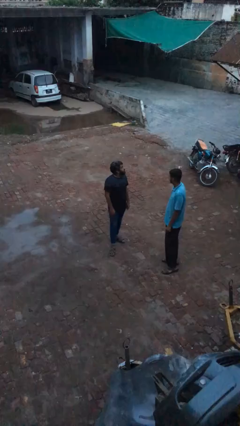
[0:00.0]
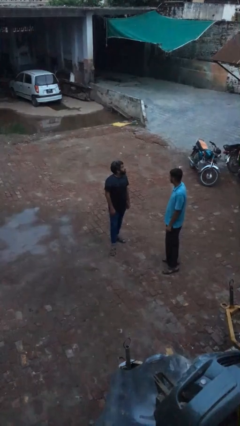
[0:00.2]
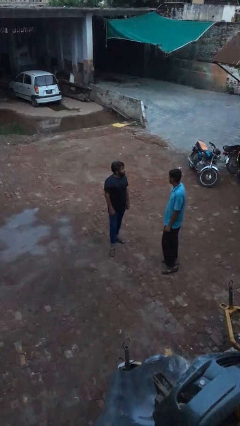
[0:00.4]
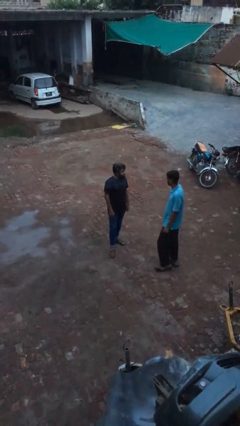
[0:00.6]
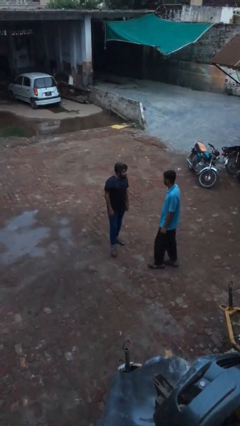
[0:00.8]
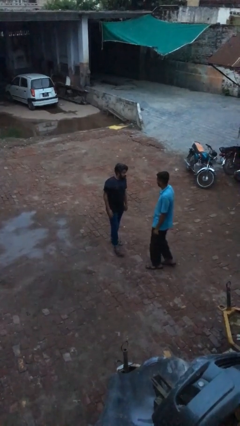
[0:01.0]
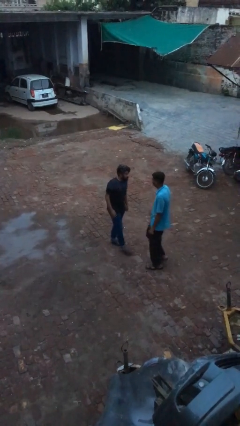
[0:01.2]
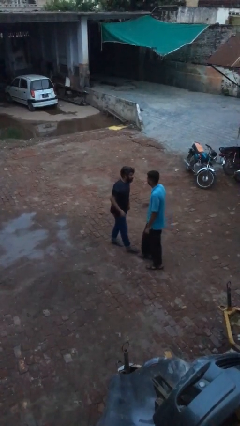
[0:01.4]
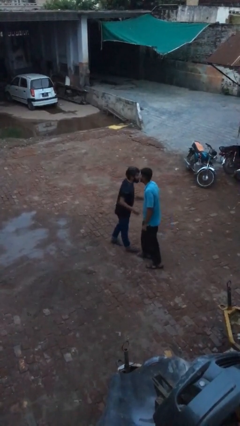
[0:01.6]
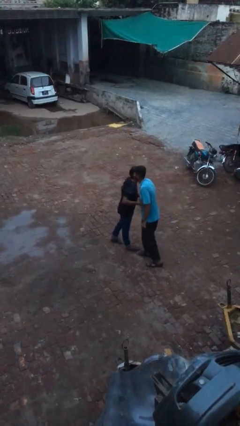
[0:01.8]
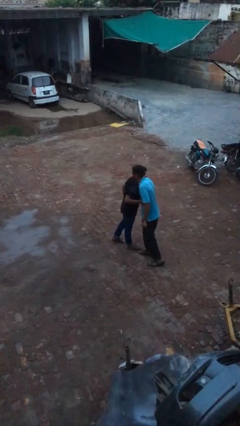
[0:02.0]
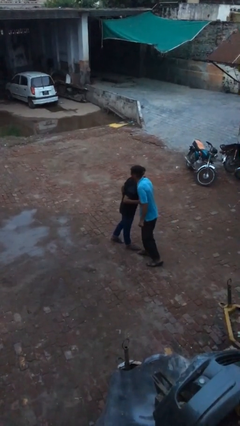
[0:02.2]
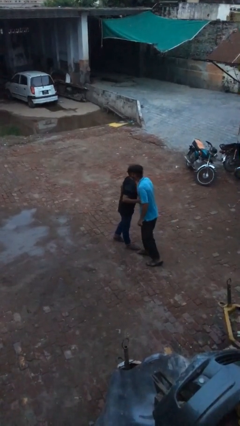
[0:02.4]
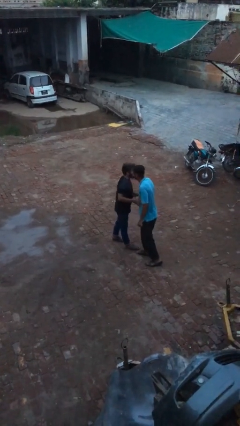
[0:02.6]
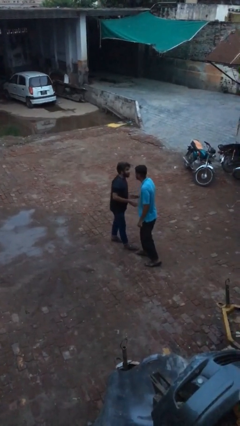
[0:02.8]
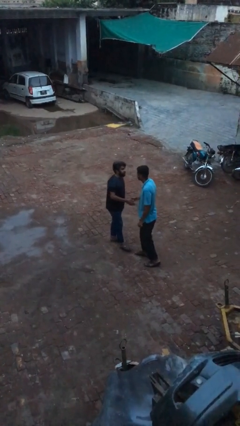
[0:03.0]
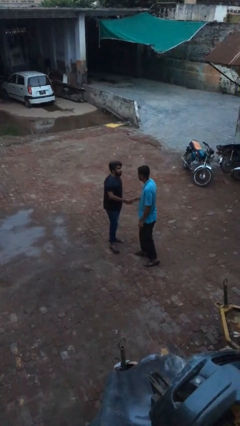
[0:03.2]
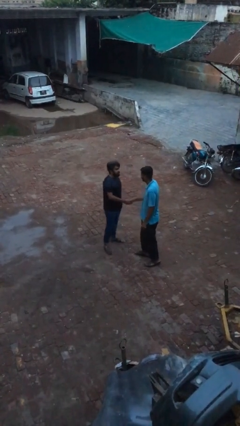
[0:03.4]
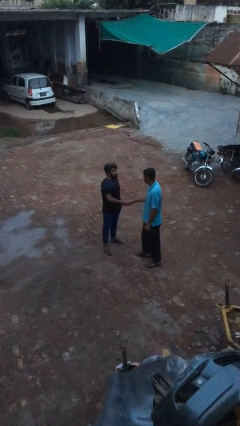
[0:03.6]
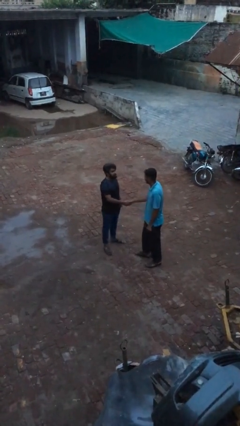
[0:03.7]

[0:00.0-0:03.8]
person embraces person

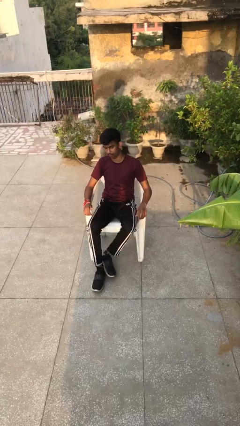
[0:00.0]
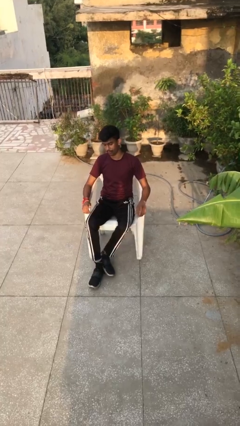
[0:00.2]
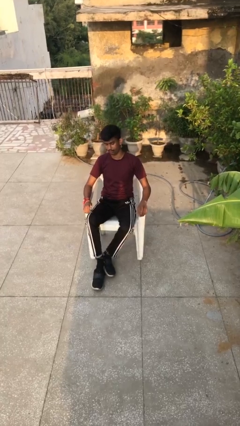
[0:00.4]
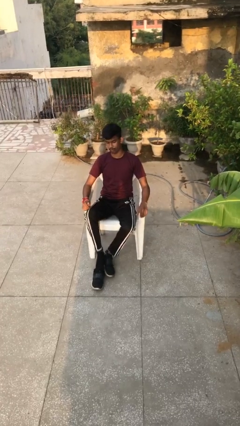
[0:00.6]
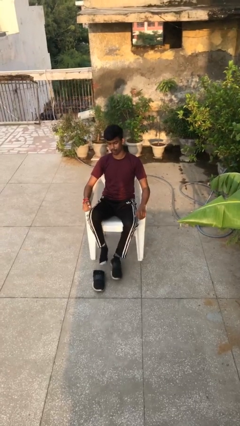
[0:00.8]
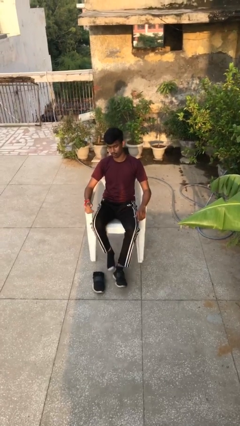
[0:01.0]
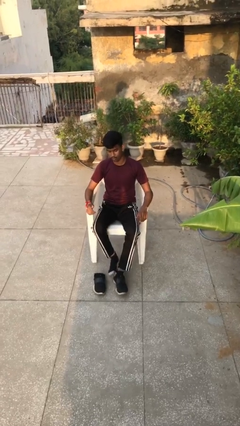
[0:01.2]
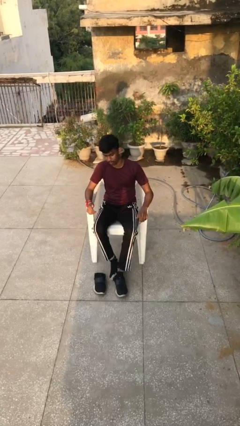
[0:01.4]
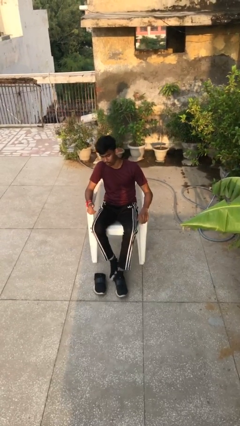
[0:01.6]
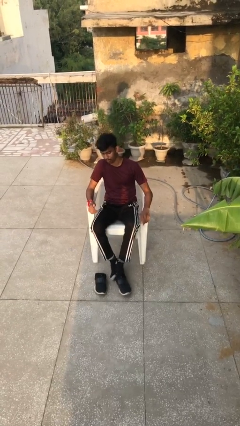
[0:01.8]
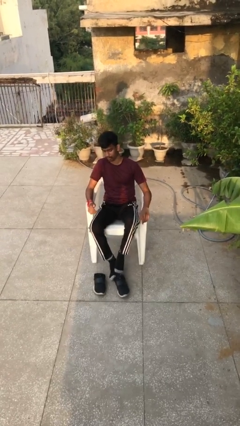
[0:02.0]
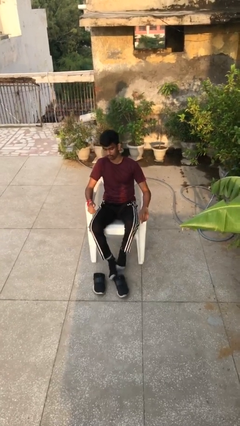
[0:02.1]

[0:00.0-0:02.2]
person takes off shoes

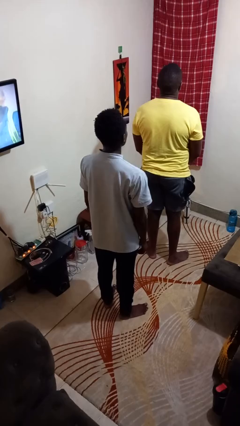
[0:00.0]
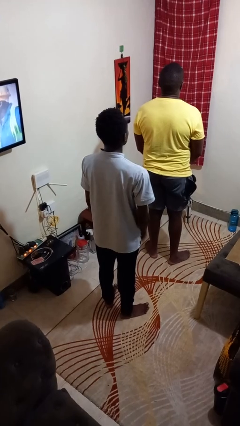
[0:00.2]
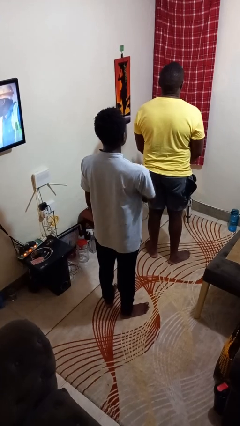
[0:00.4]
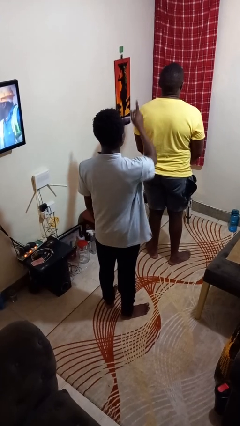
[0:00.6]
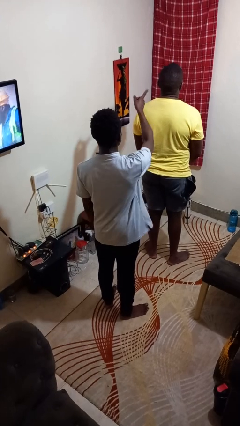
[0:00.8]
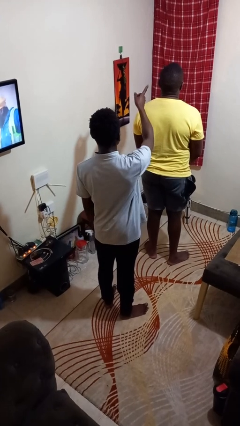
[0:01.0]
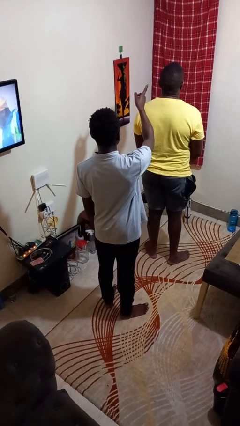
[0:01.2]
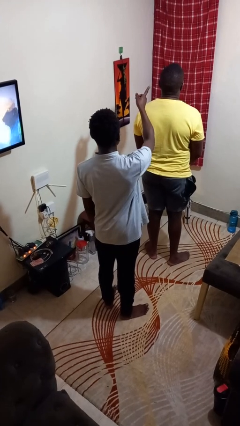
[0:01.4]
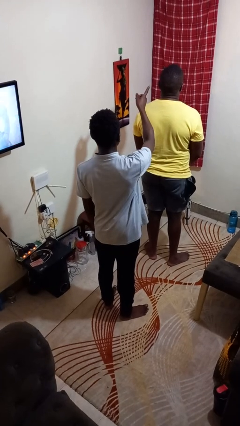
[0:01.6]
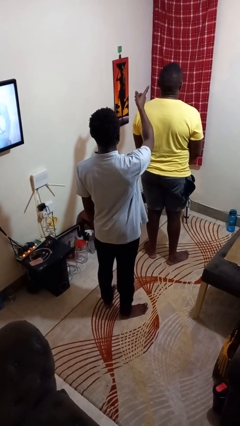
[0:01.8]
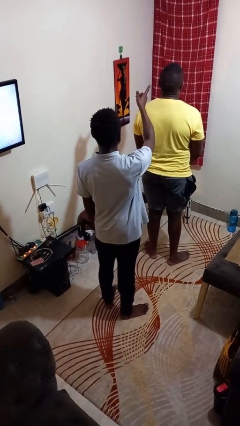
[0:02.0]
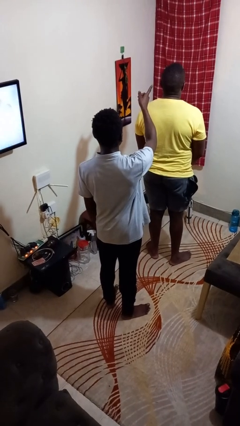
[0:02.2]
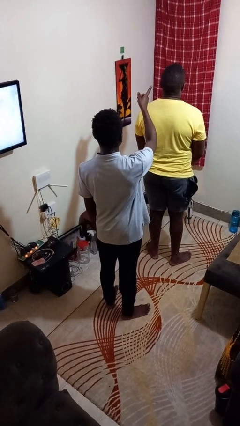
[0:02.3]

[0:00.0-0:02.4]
person points at person

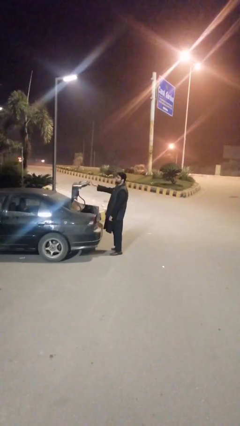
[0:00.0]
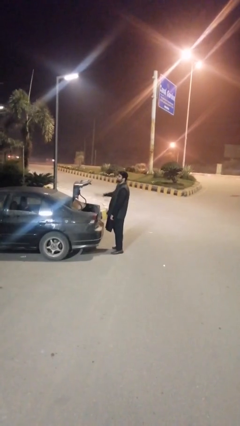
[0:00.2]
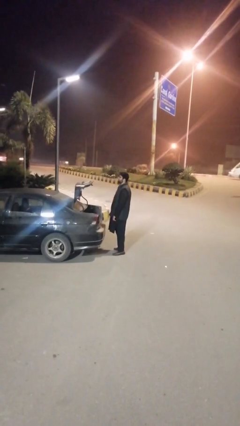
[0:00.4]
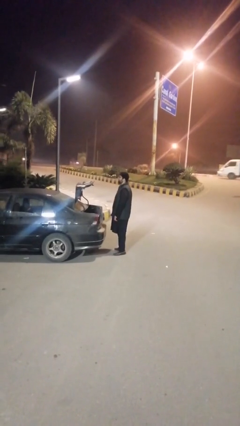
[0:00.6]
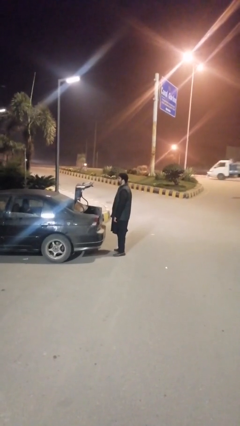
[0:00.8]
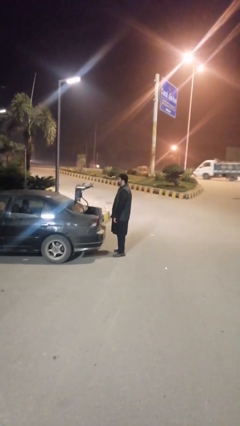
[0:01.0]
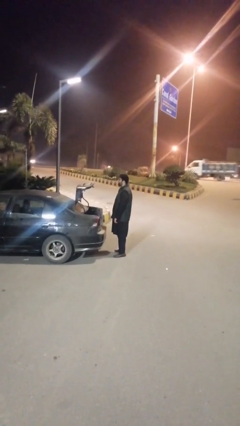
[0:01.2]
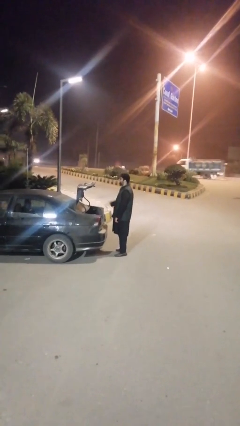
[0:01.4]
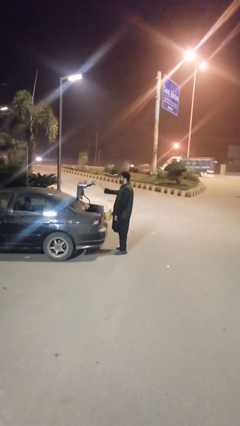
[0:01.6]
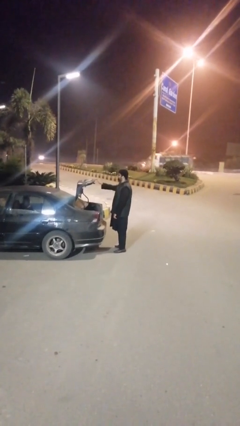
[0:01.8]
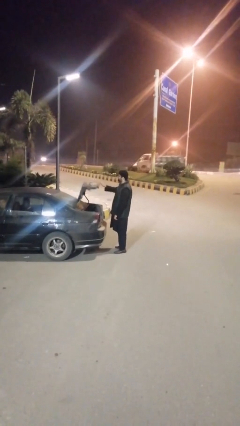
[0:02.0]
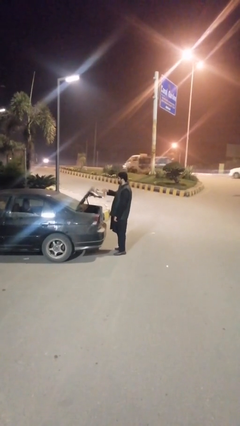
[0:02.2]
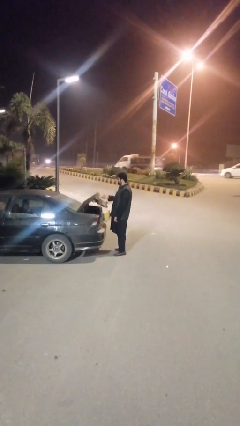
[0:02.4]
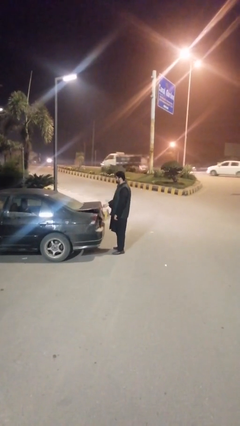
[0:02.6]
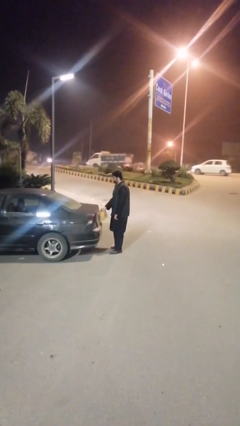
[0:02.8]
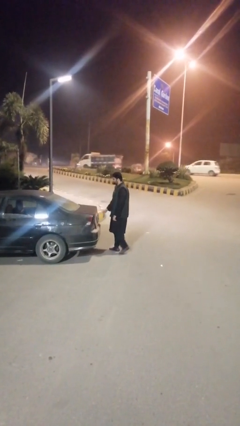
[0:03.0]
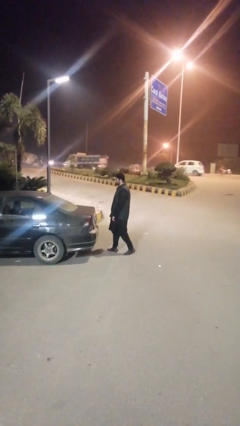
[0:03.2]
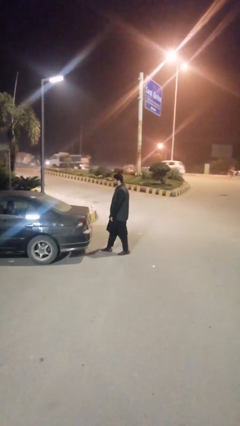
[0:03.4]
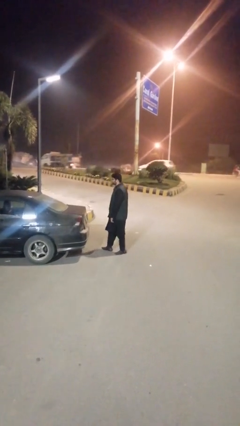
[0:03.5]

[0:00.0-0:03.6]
person opens car trunk

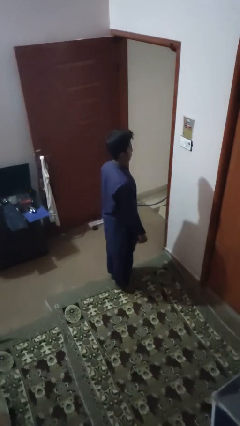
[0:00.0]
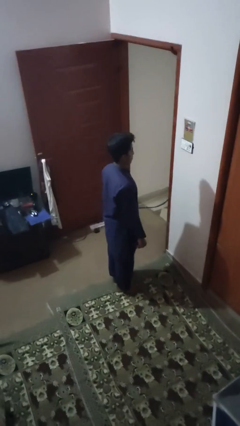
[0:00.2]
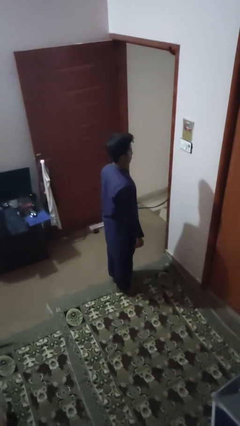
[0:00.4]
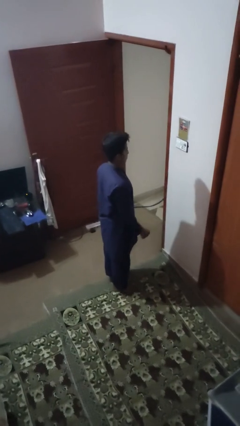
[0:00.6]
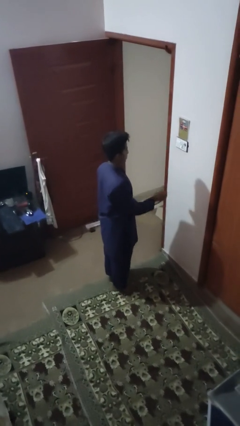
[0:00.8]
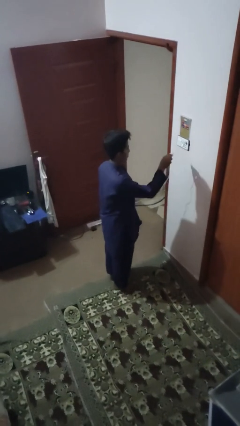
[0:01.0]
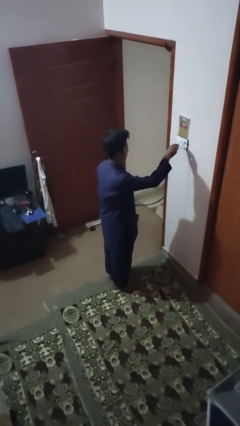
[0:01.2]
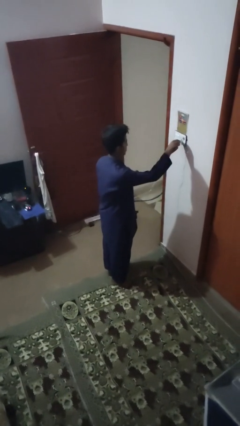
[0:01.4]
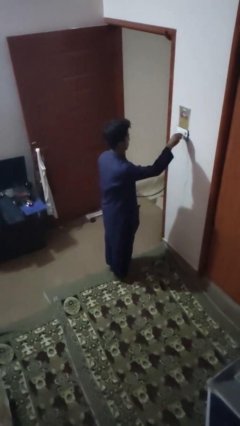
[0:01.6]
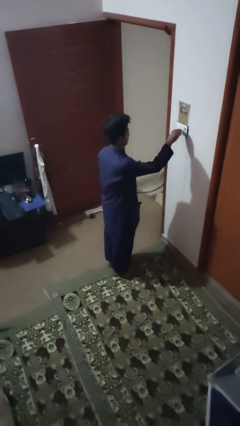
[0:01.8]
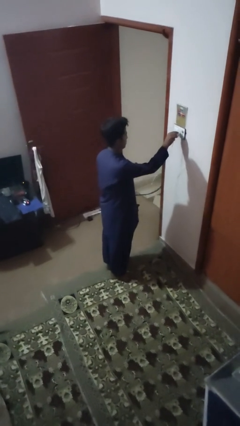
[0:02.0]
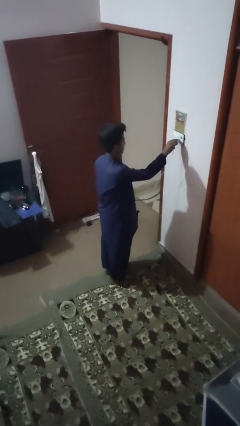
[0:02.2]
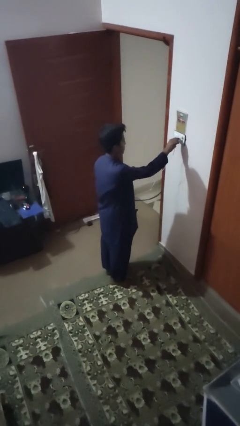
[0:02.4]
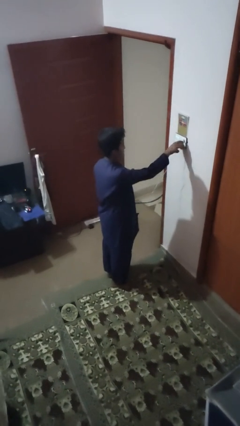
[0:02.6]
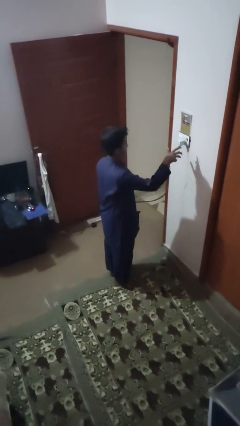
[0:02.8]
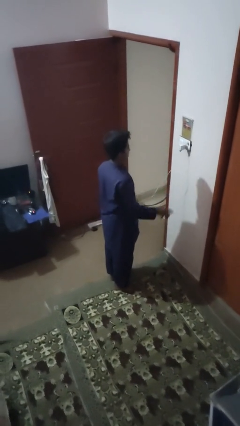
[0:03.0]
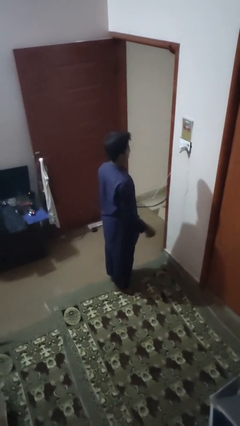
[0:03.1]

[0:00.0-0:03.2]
person plugs into electrical socket

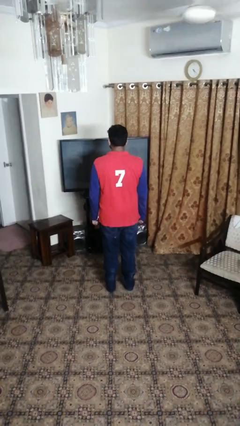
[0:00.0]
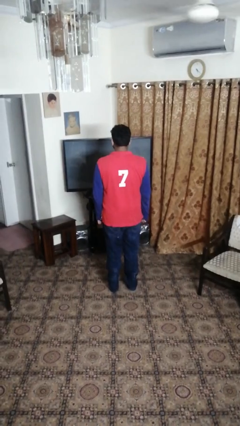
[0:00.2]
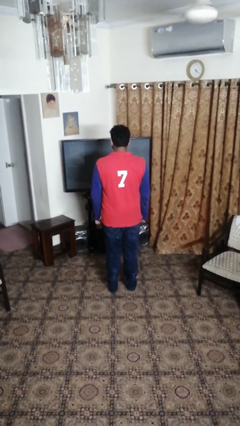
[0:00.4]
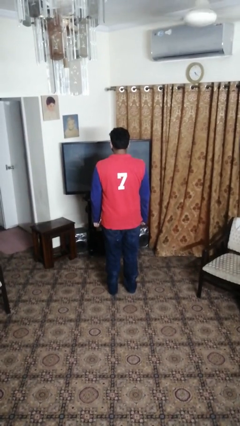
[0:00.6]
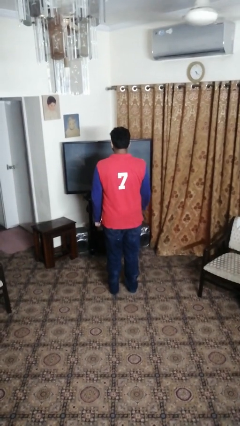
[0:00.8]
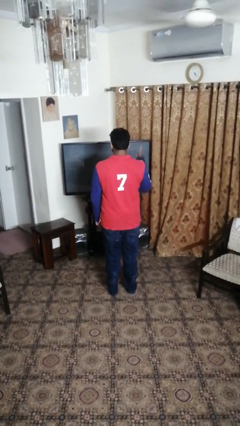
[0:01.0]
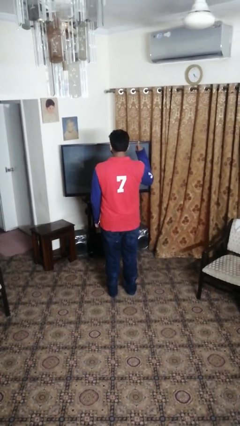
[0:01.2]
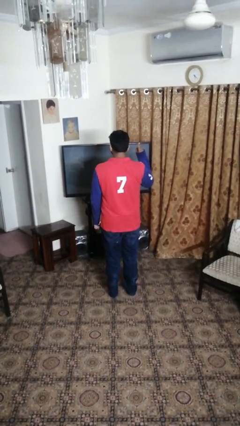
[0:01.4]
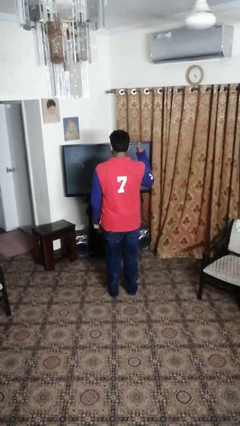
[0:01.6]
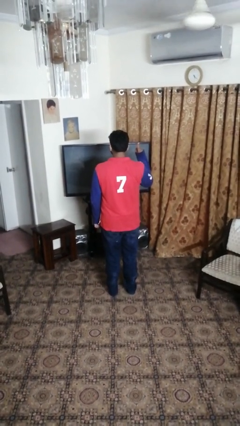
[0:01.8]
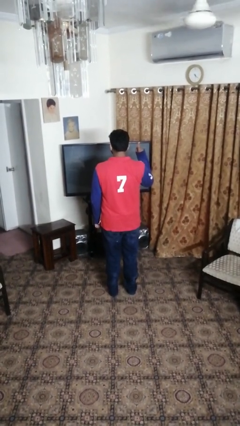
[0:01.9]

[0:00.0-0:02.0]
person gestures number one

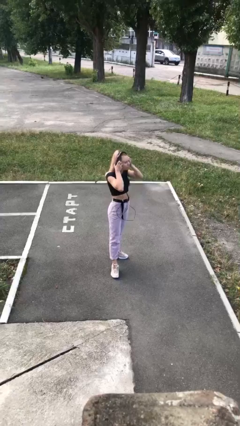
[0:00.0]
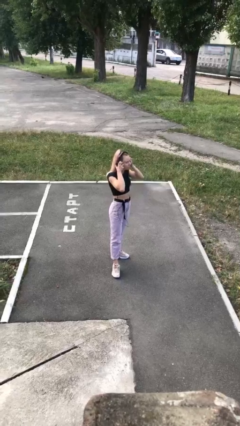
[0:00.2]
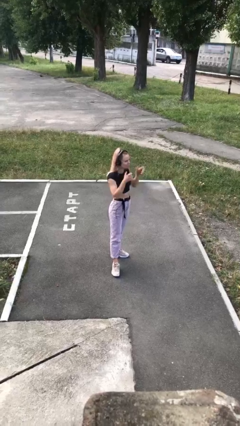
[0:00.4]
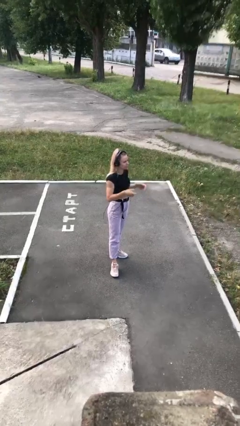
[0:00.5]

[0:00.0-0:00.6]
person puts on headphones
